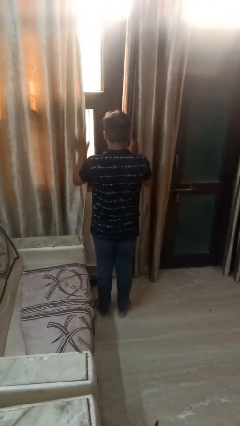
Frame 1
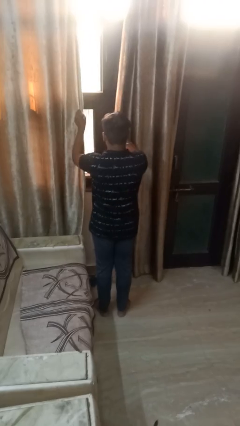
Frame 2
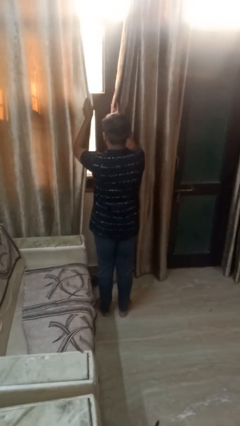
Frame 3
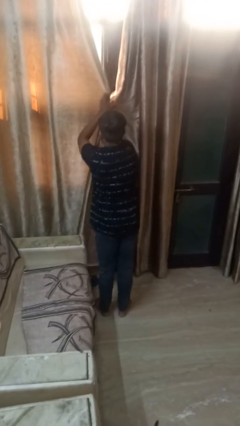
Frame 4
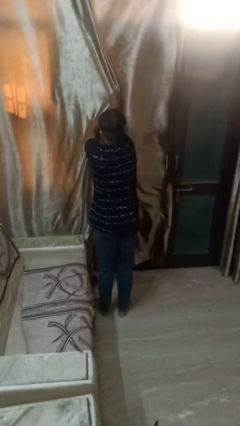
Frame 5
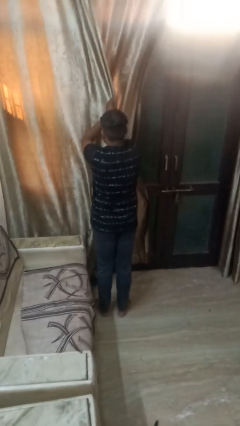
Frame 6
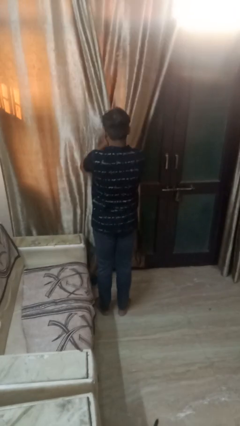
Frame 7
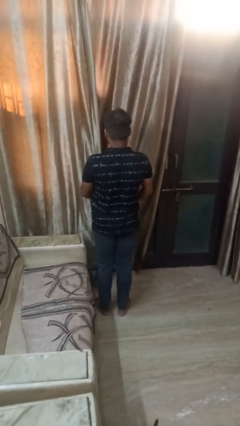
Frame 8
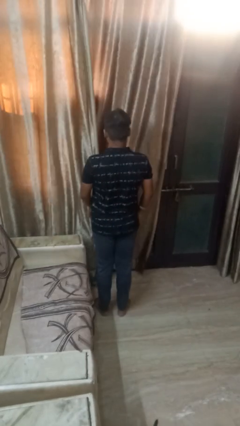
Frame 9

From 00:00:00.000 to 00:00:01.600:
person closes curtains

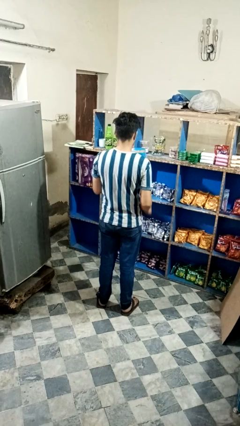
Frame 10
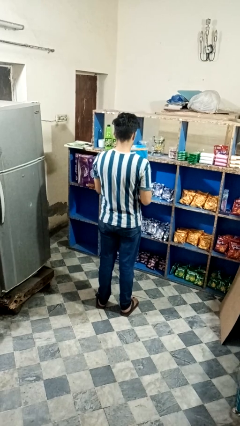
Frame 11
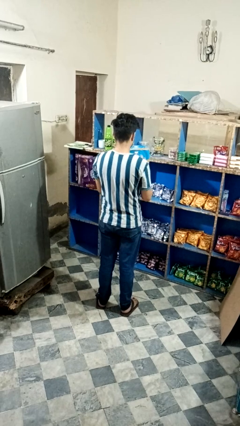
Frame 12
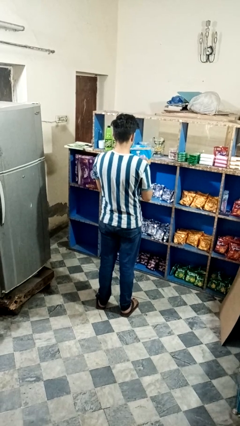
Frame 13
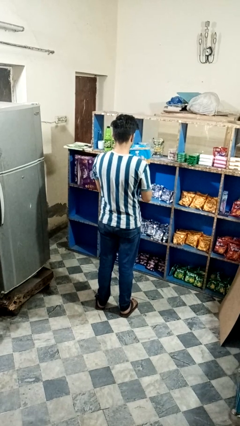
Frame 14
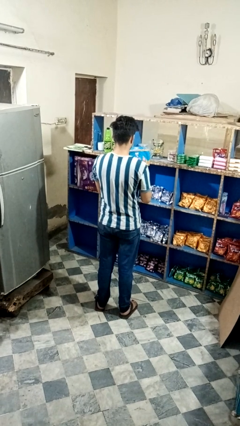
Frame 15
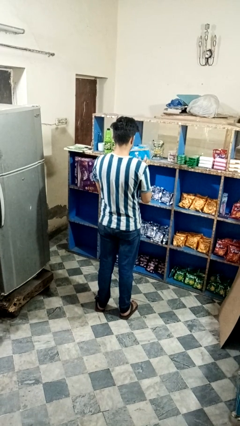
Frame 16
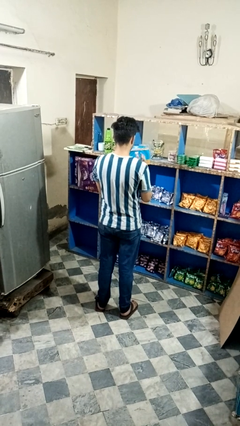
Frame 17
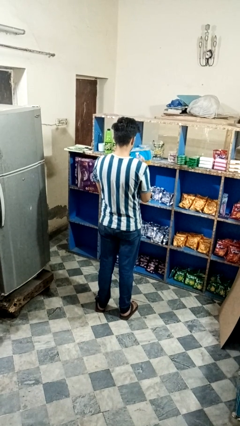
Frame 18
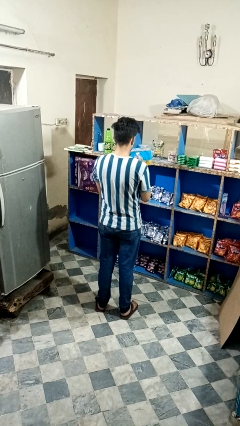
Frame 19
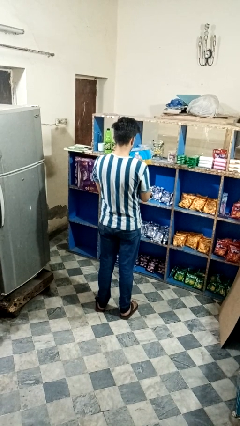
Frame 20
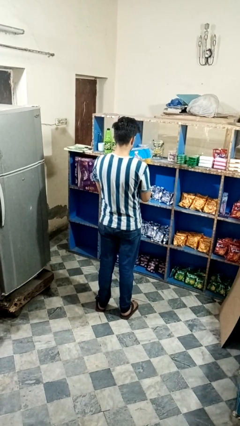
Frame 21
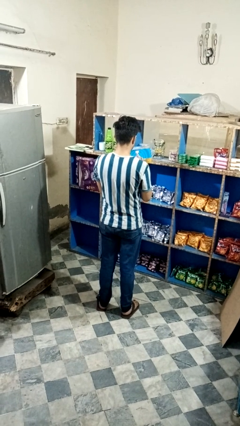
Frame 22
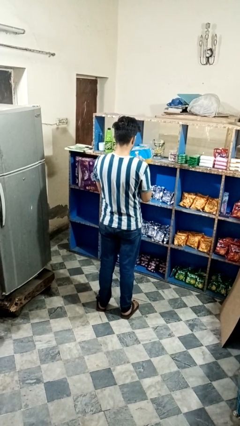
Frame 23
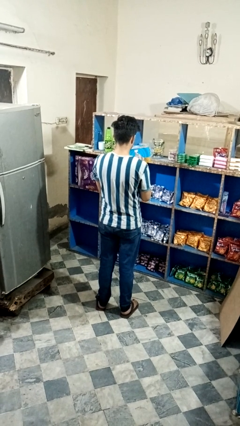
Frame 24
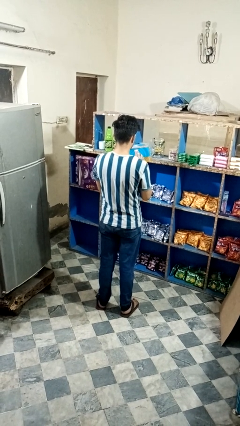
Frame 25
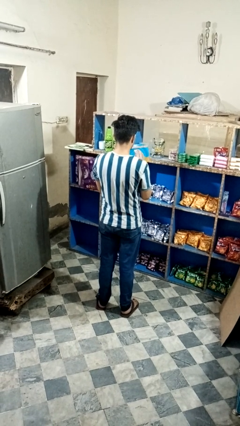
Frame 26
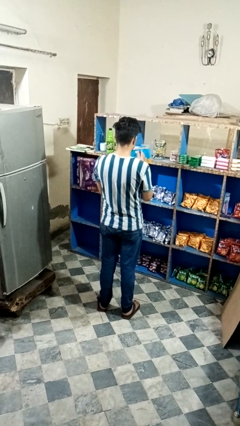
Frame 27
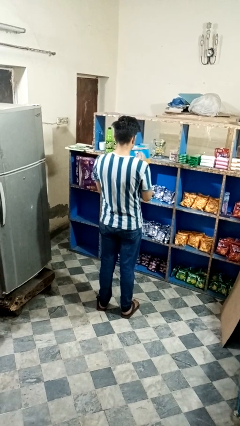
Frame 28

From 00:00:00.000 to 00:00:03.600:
person taps object with finger

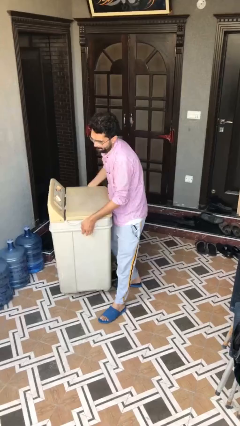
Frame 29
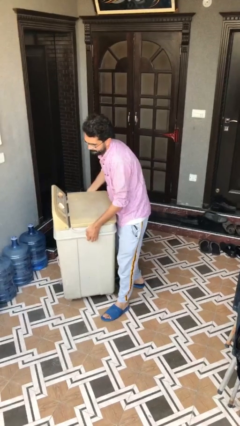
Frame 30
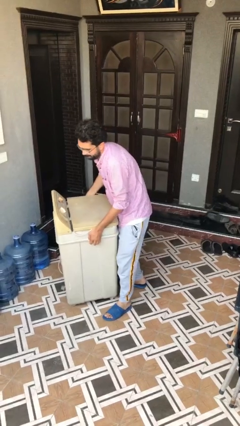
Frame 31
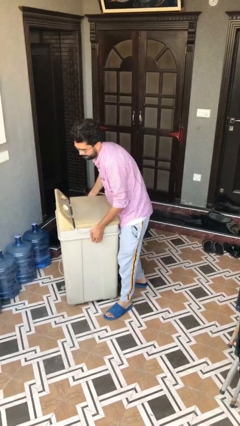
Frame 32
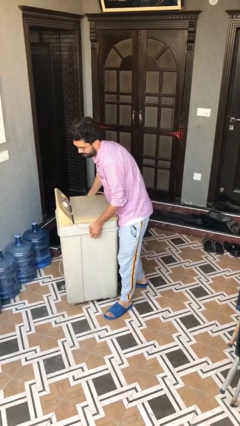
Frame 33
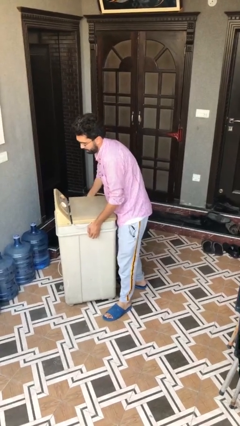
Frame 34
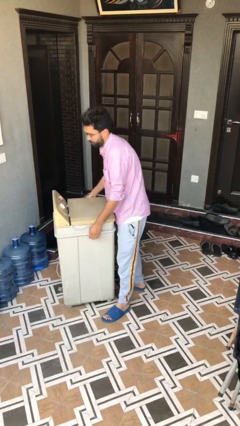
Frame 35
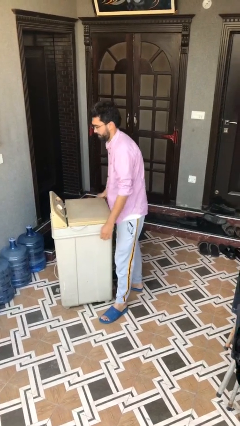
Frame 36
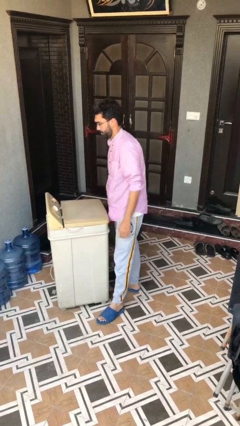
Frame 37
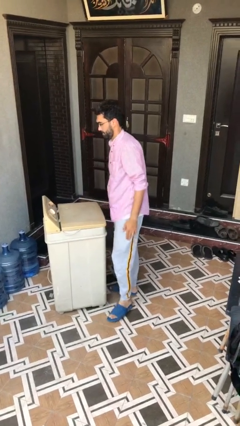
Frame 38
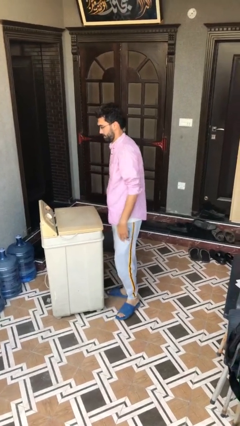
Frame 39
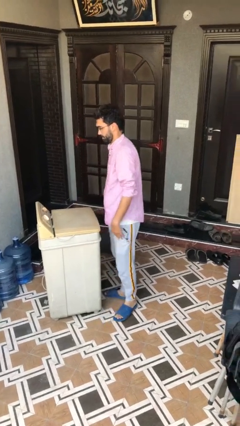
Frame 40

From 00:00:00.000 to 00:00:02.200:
person puts down object on floor

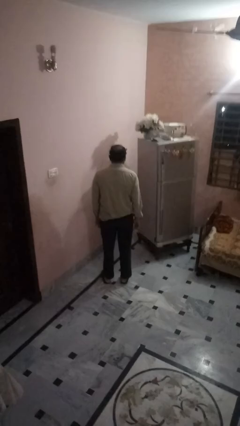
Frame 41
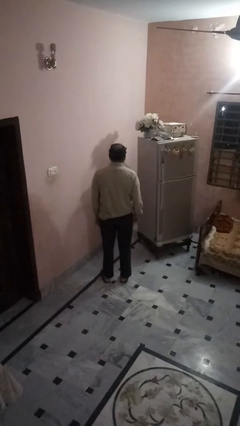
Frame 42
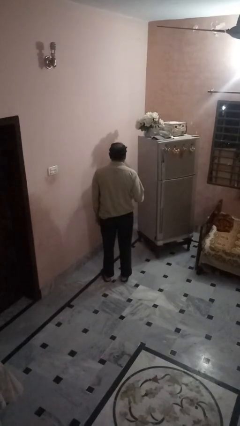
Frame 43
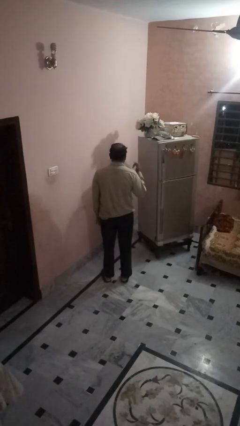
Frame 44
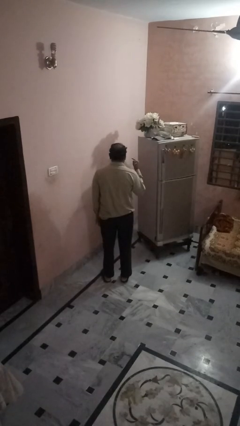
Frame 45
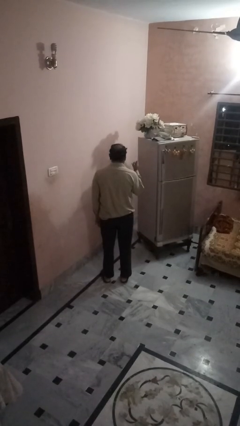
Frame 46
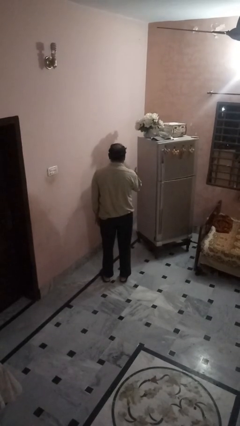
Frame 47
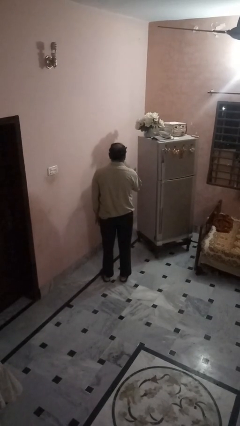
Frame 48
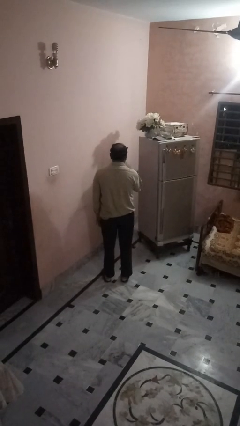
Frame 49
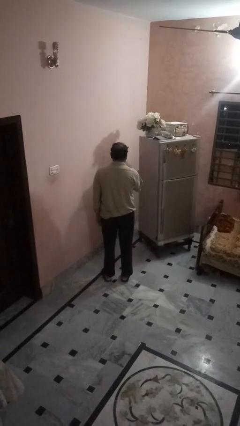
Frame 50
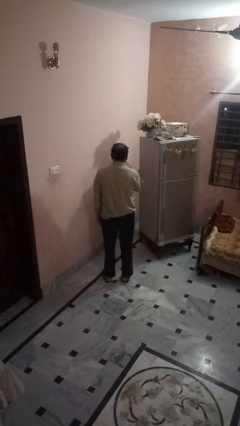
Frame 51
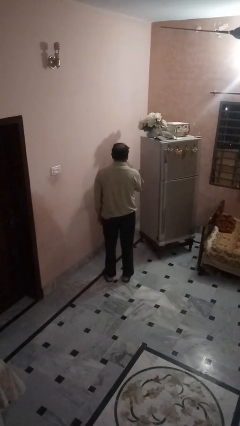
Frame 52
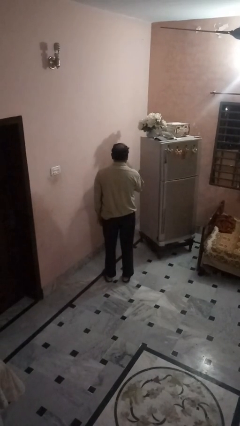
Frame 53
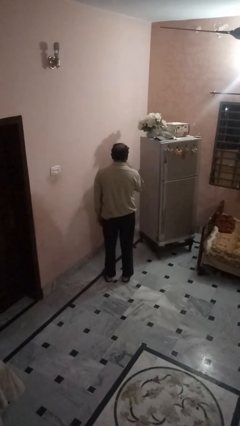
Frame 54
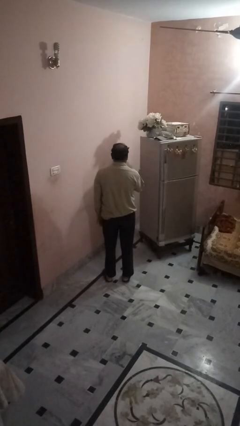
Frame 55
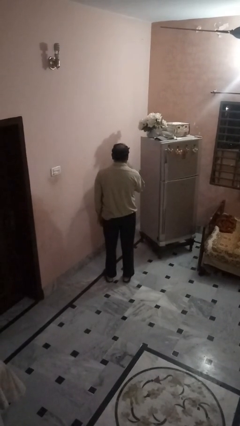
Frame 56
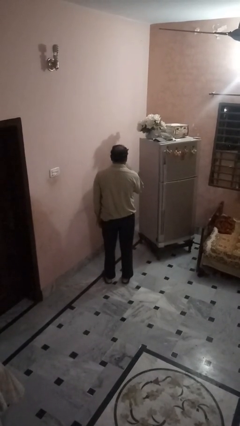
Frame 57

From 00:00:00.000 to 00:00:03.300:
person gestures hang loose

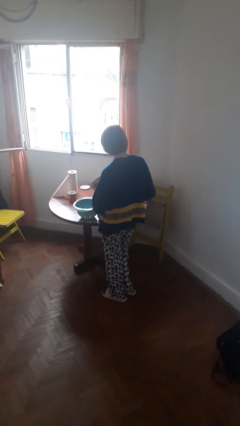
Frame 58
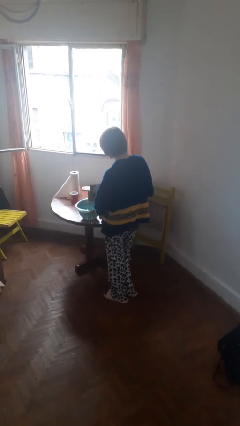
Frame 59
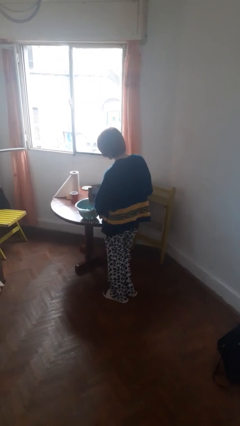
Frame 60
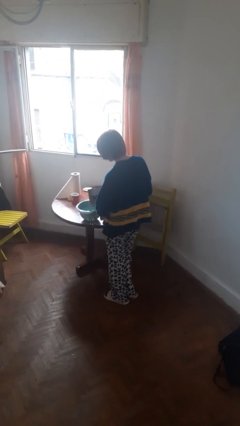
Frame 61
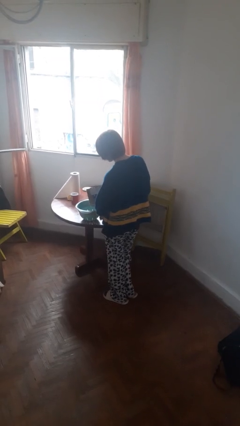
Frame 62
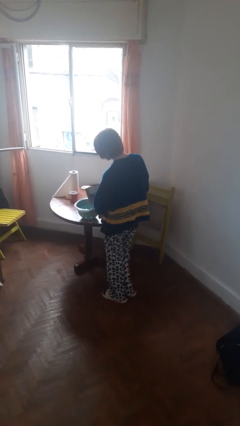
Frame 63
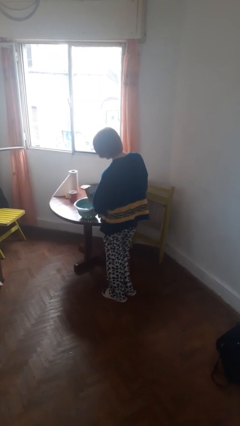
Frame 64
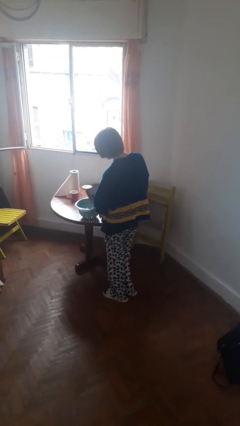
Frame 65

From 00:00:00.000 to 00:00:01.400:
person pours into bowl

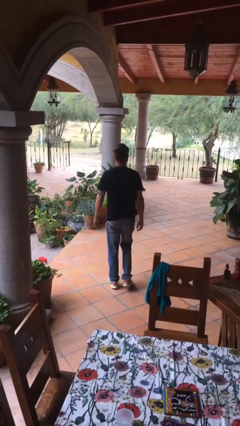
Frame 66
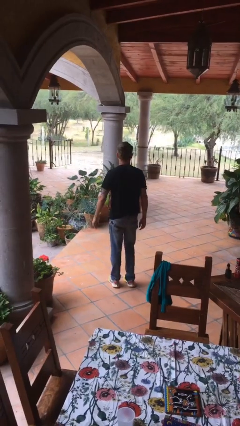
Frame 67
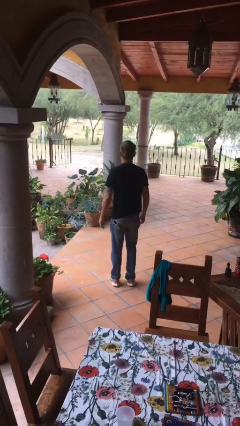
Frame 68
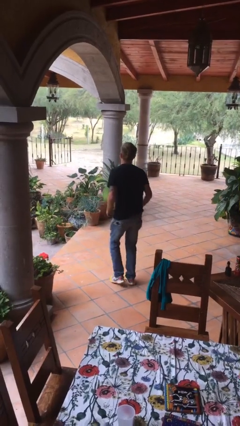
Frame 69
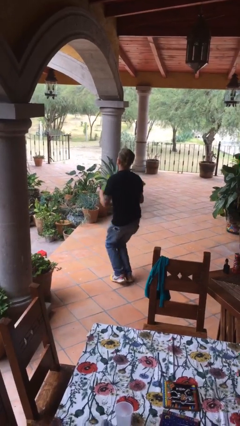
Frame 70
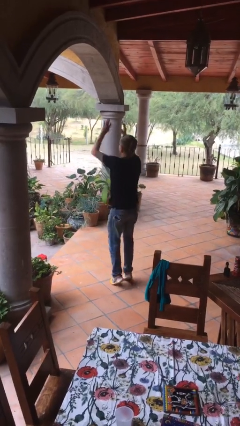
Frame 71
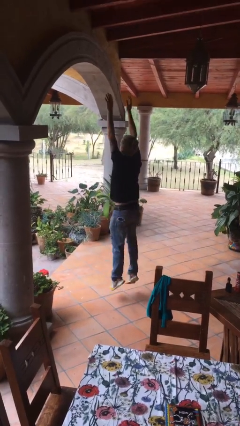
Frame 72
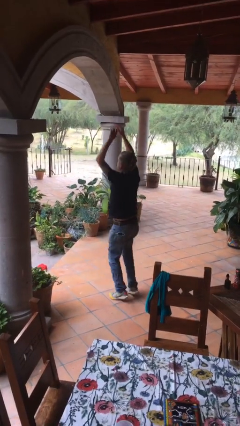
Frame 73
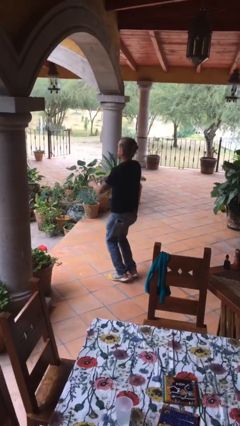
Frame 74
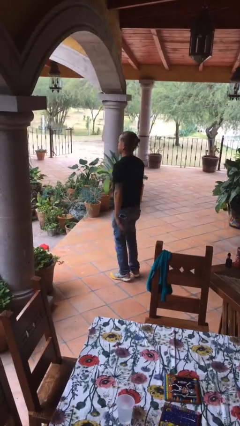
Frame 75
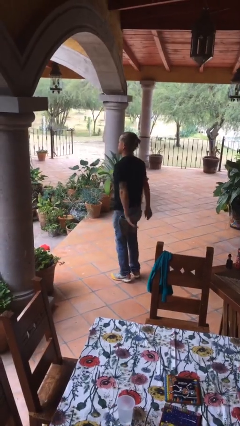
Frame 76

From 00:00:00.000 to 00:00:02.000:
person jumps

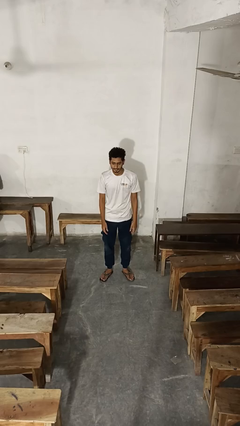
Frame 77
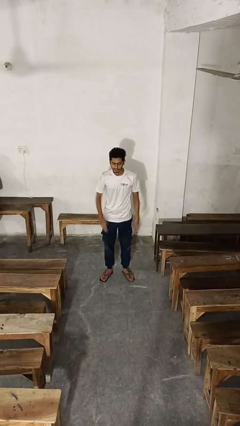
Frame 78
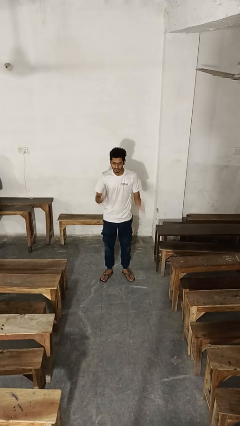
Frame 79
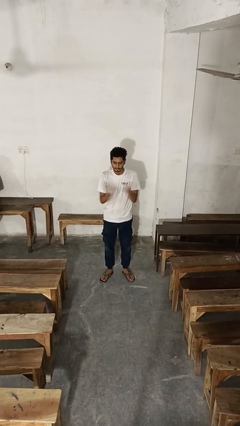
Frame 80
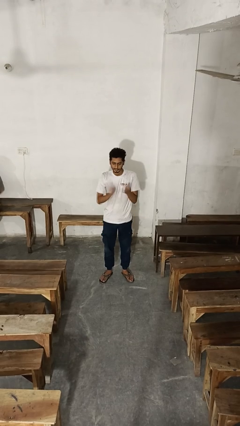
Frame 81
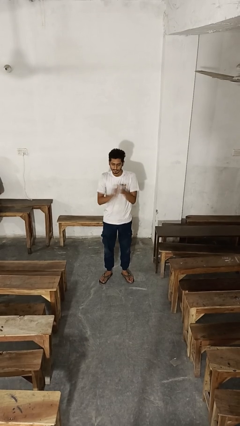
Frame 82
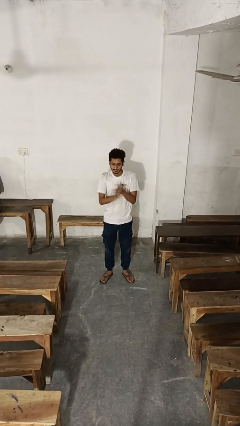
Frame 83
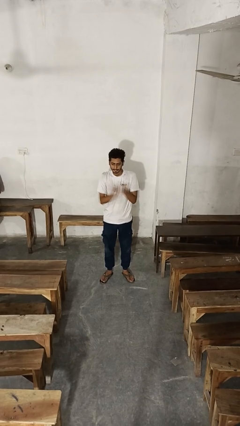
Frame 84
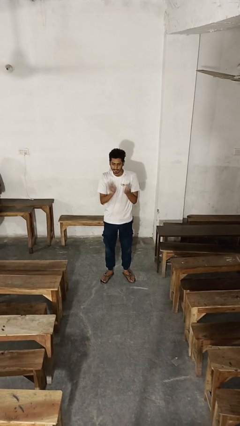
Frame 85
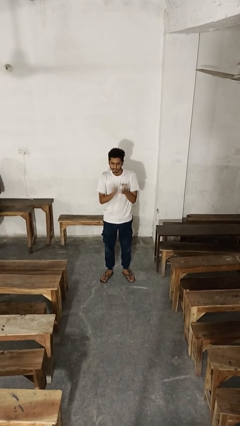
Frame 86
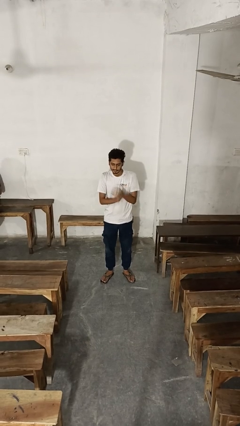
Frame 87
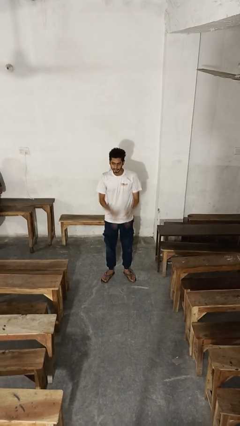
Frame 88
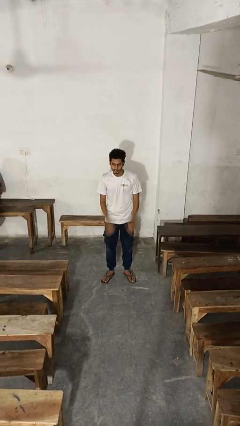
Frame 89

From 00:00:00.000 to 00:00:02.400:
person claps hands
